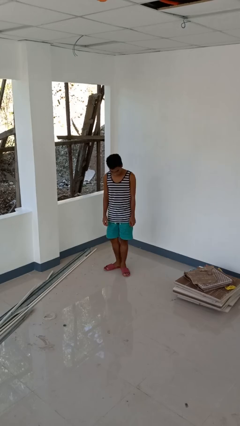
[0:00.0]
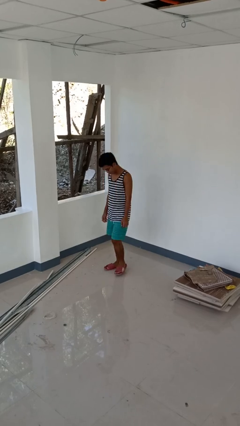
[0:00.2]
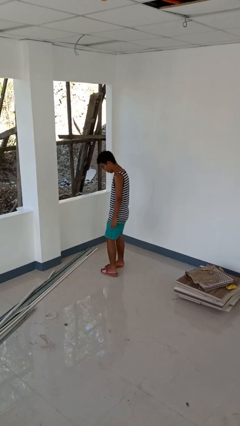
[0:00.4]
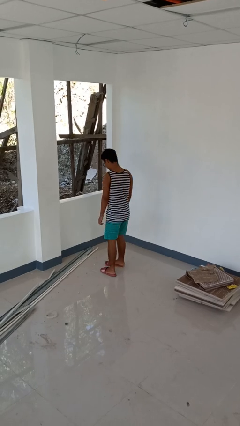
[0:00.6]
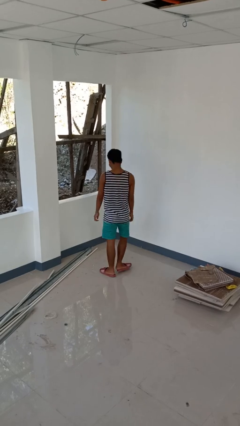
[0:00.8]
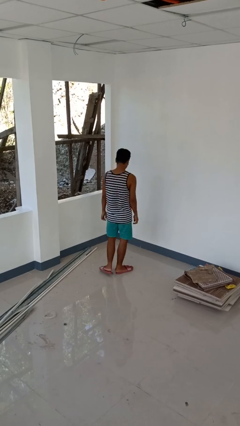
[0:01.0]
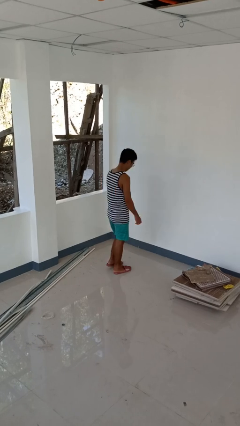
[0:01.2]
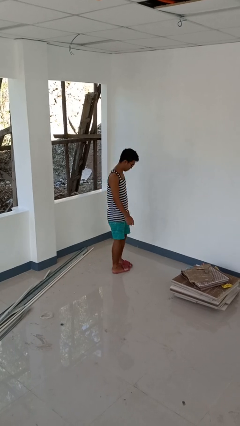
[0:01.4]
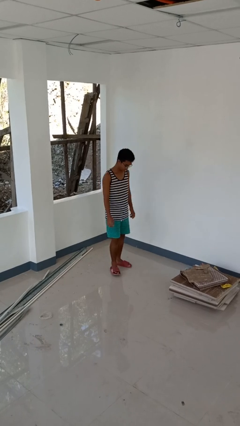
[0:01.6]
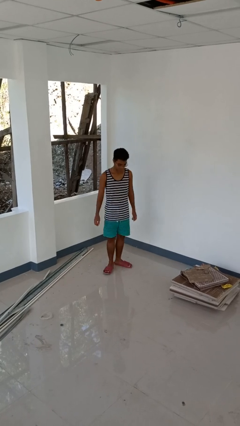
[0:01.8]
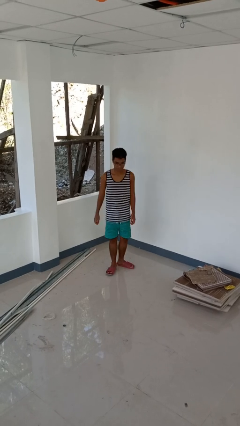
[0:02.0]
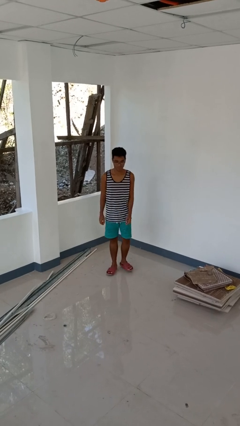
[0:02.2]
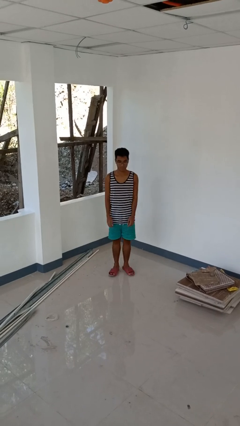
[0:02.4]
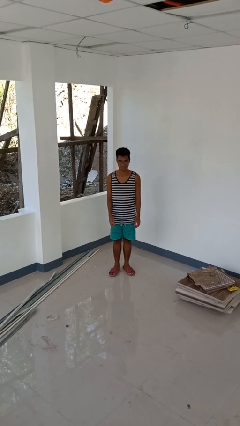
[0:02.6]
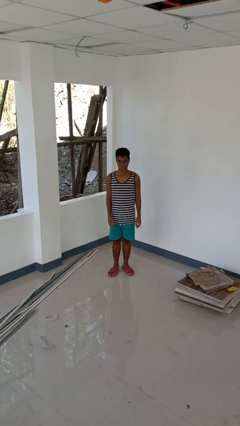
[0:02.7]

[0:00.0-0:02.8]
person twirls

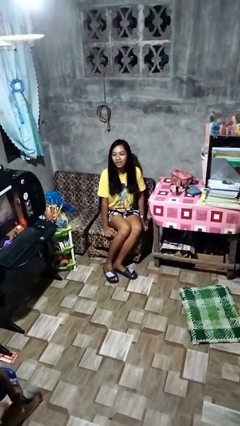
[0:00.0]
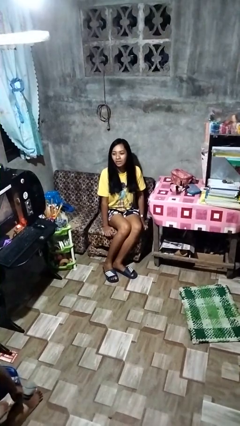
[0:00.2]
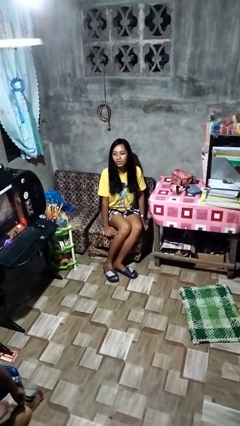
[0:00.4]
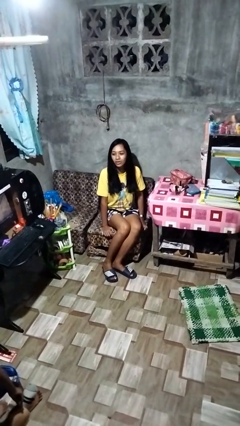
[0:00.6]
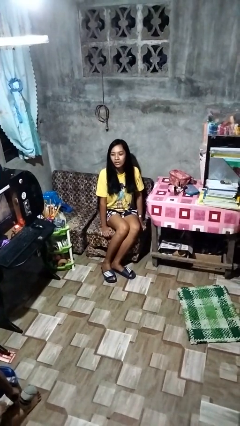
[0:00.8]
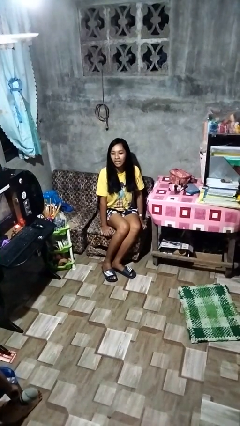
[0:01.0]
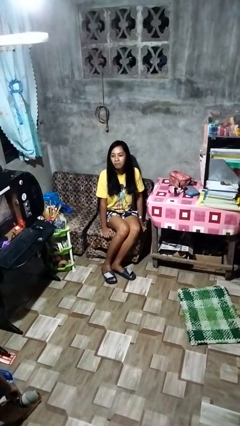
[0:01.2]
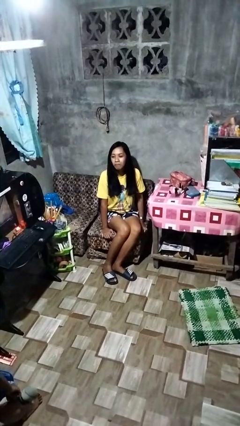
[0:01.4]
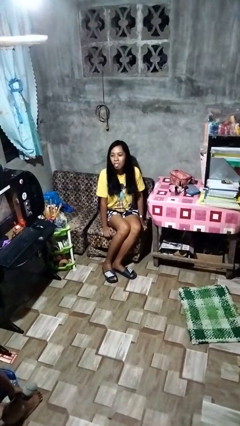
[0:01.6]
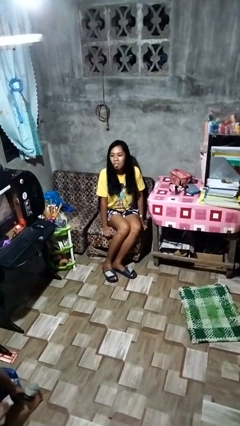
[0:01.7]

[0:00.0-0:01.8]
person sticks out tongue

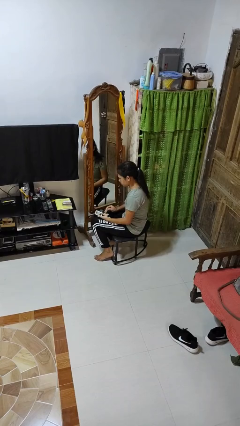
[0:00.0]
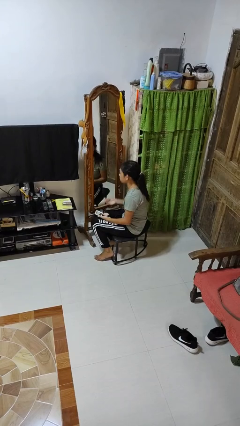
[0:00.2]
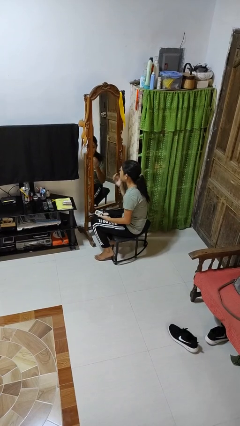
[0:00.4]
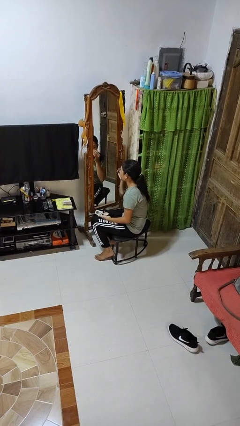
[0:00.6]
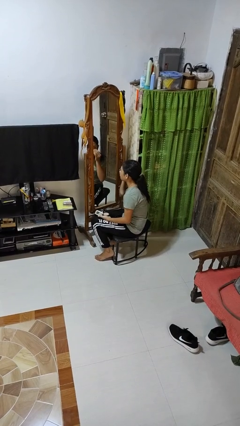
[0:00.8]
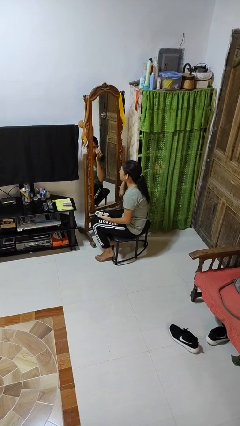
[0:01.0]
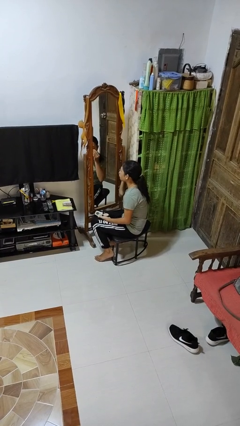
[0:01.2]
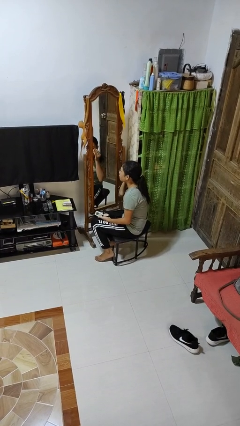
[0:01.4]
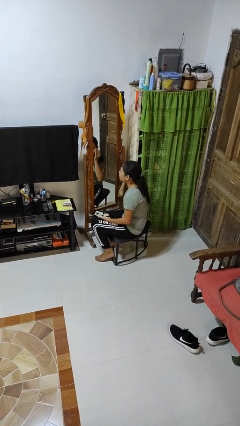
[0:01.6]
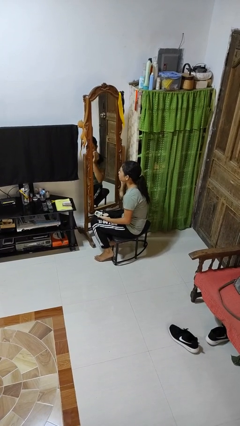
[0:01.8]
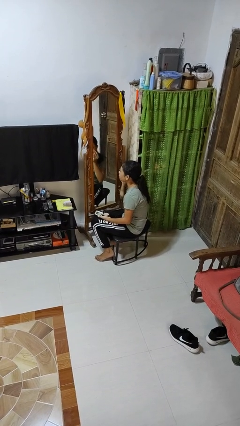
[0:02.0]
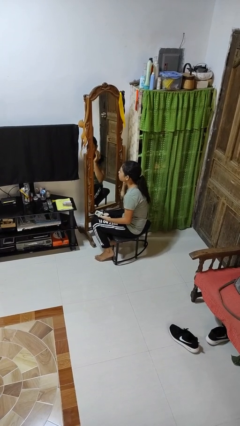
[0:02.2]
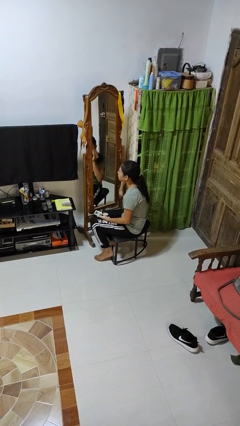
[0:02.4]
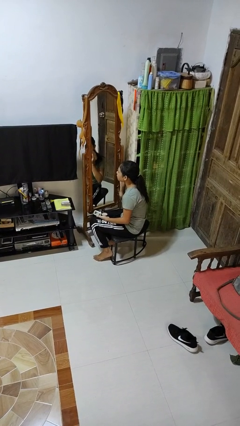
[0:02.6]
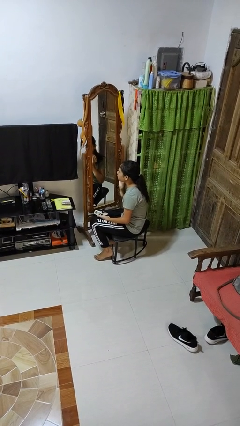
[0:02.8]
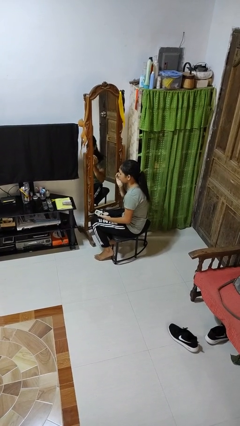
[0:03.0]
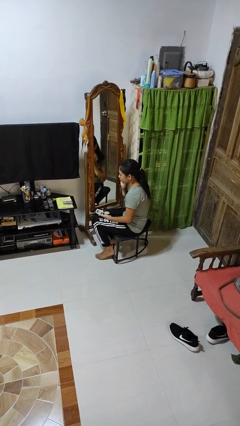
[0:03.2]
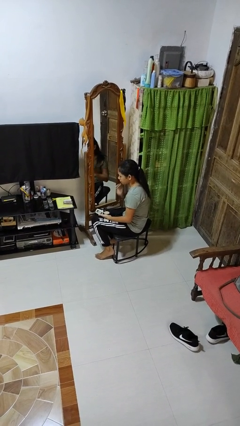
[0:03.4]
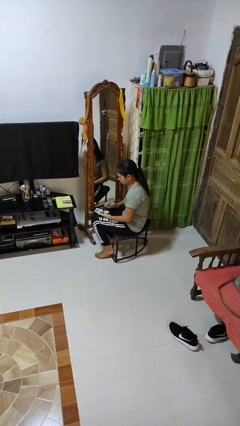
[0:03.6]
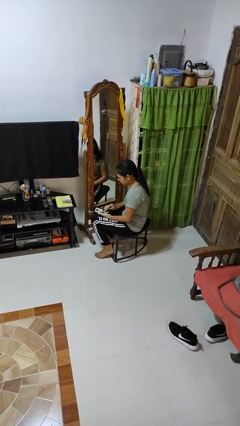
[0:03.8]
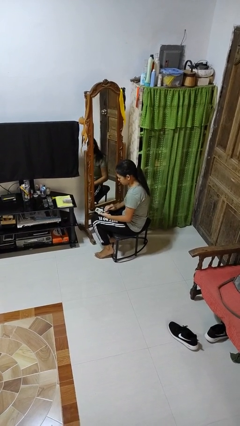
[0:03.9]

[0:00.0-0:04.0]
person applies foundation makeup

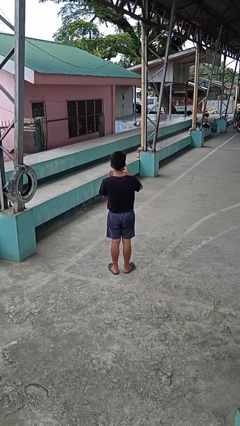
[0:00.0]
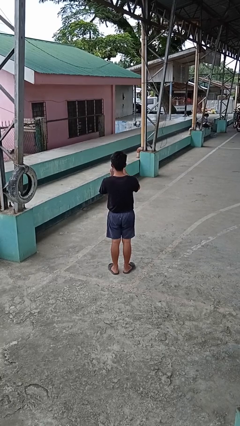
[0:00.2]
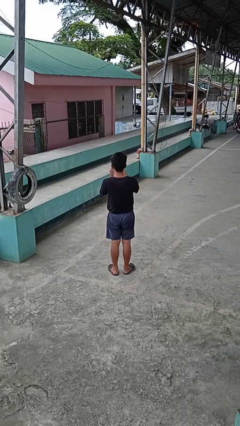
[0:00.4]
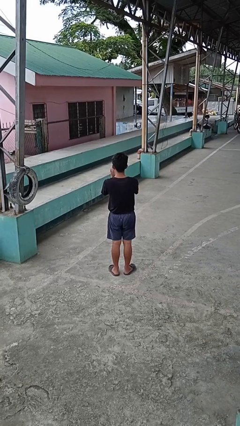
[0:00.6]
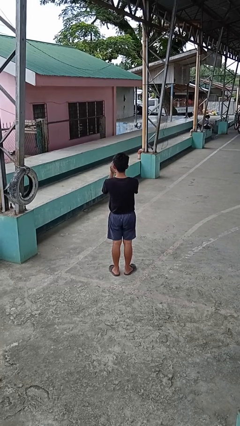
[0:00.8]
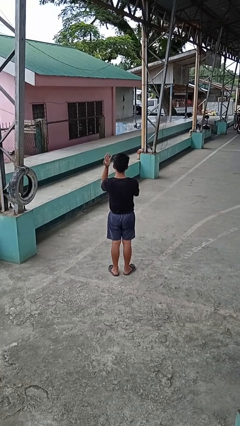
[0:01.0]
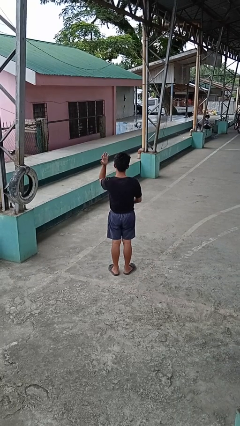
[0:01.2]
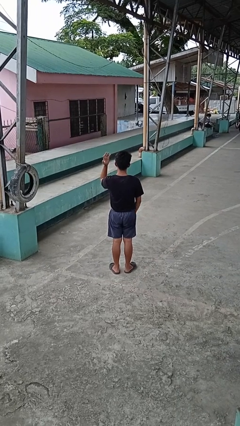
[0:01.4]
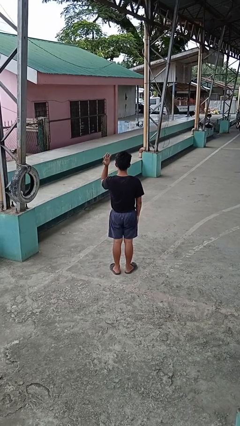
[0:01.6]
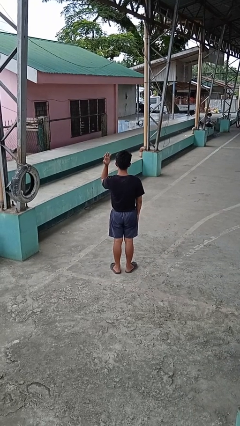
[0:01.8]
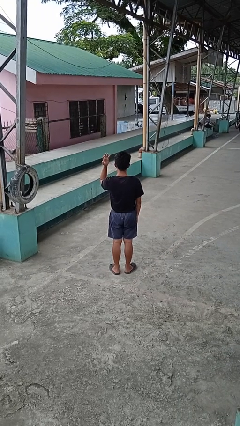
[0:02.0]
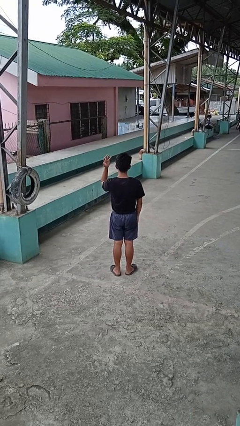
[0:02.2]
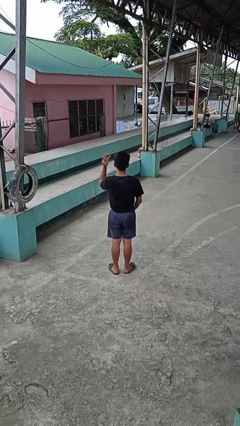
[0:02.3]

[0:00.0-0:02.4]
person puts on ring

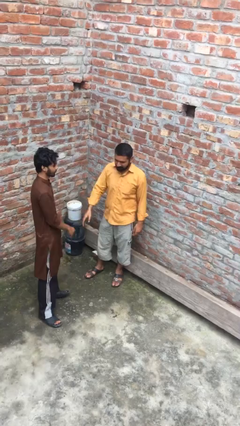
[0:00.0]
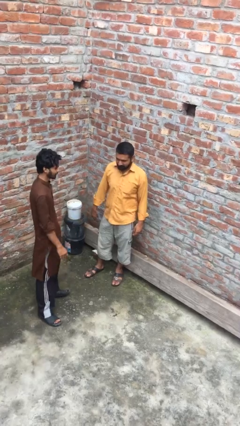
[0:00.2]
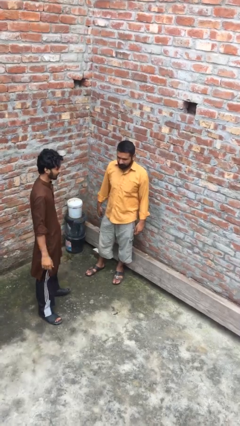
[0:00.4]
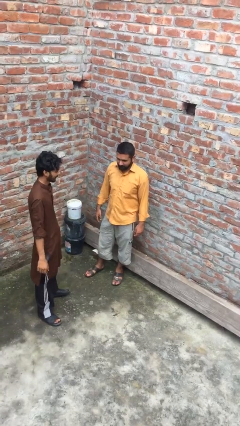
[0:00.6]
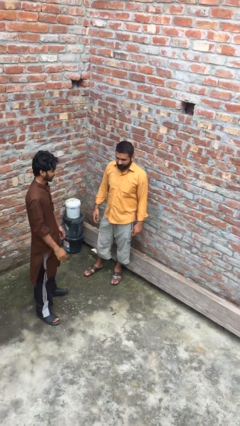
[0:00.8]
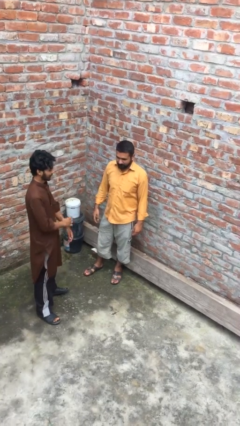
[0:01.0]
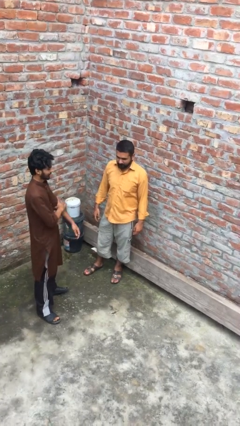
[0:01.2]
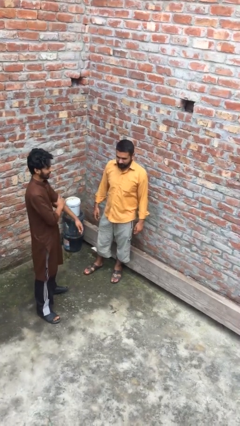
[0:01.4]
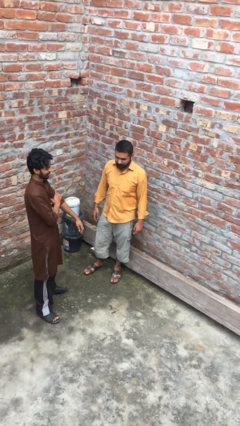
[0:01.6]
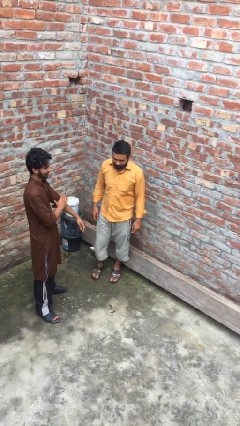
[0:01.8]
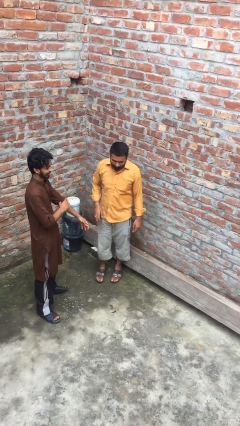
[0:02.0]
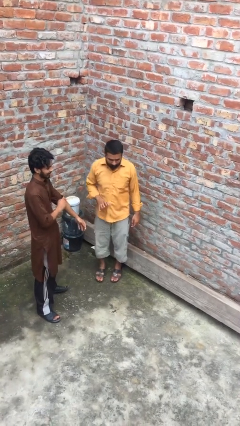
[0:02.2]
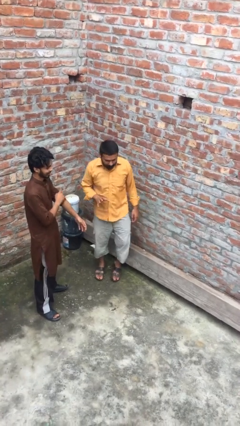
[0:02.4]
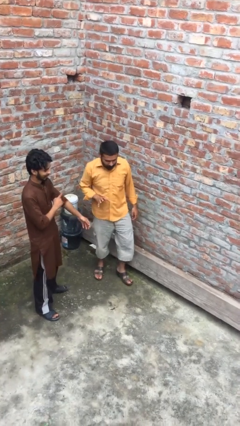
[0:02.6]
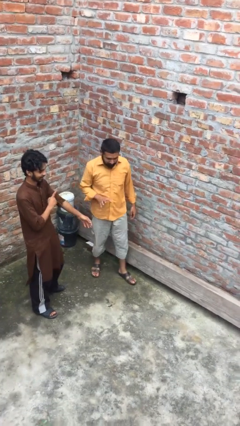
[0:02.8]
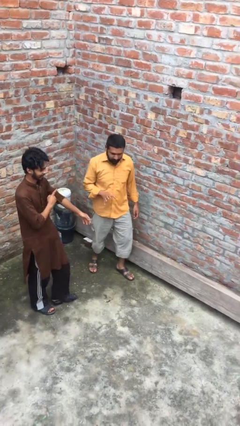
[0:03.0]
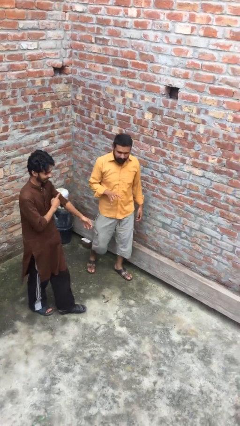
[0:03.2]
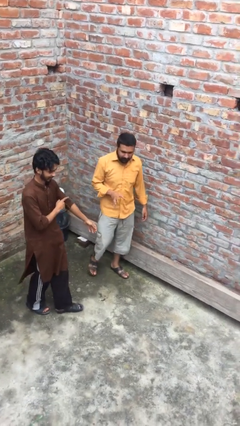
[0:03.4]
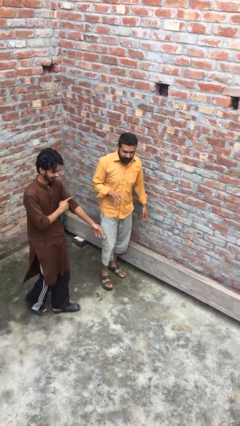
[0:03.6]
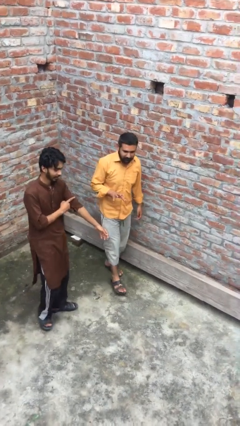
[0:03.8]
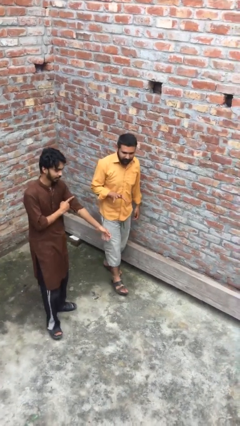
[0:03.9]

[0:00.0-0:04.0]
person talks to person

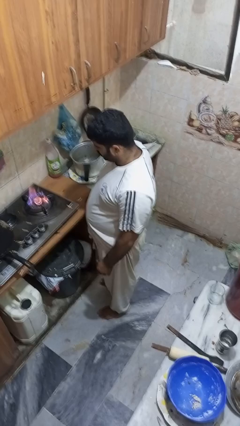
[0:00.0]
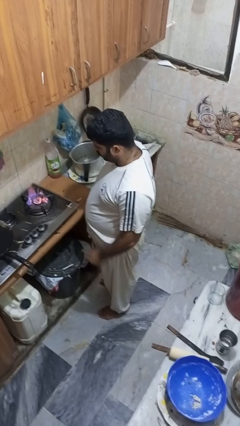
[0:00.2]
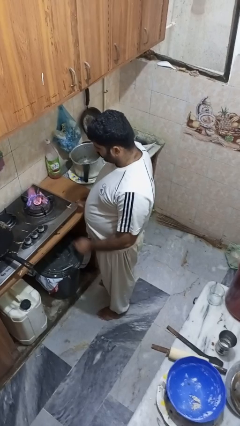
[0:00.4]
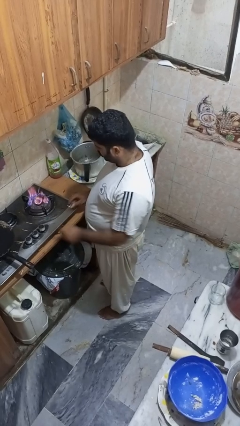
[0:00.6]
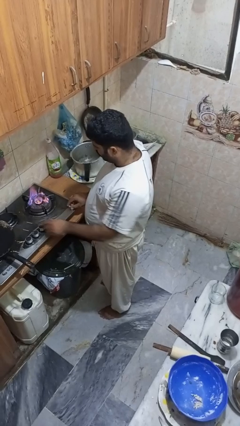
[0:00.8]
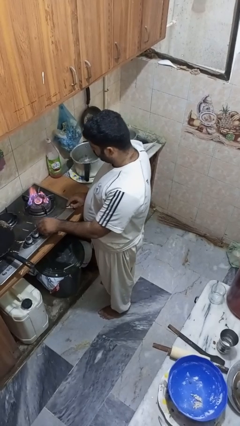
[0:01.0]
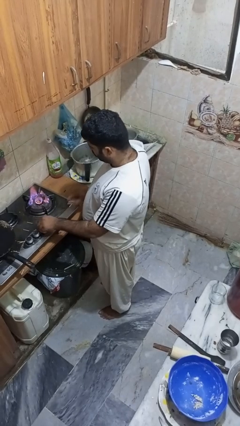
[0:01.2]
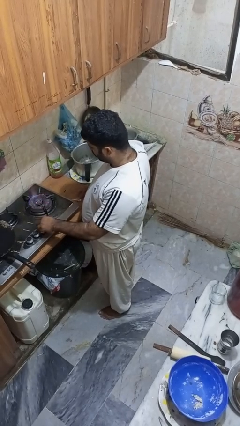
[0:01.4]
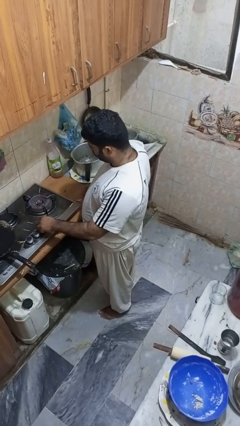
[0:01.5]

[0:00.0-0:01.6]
person turns off stovetop

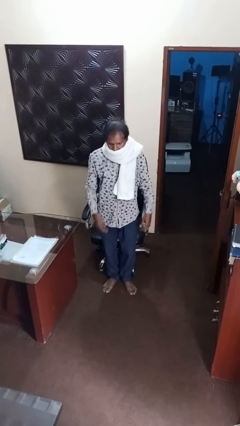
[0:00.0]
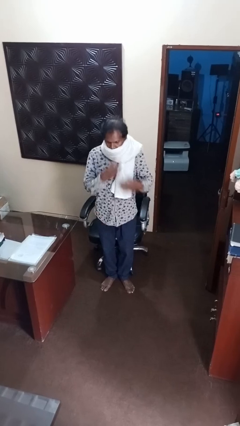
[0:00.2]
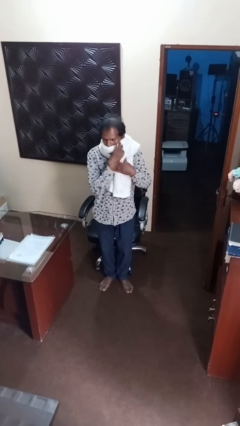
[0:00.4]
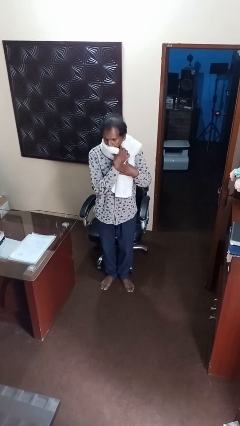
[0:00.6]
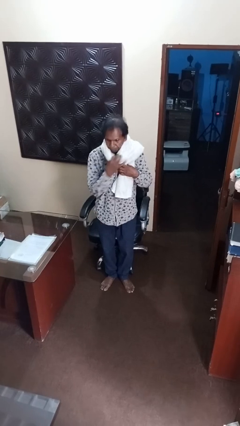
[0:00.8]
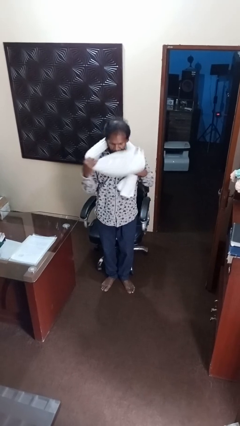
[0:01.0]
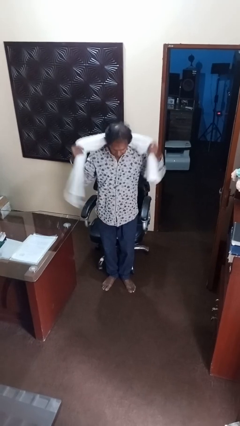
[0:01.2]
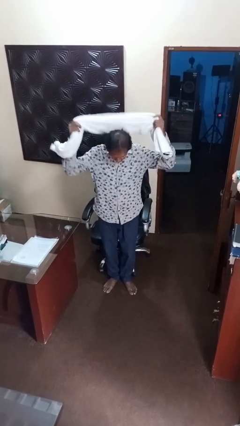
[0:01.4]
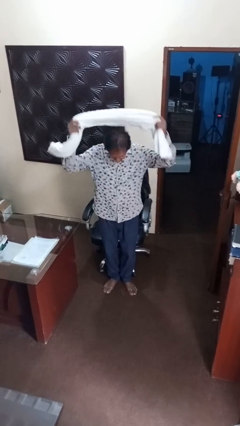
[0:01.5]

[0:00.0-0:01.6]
person takes off scarf
